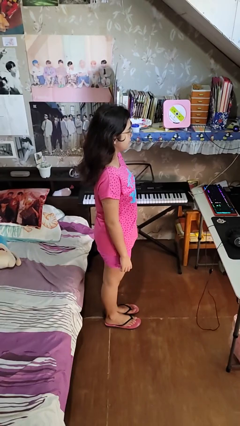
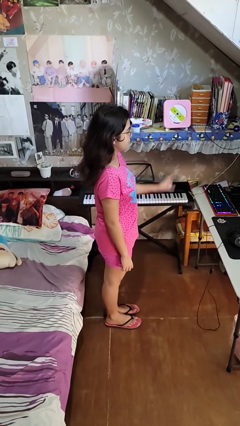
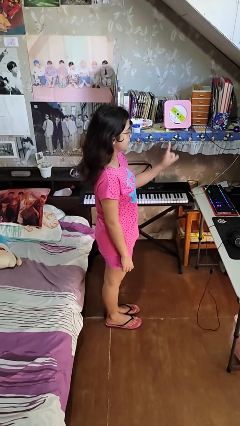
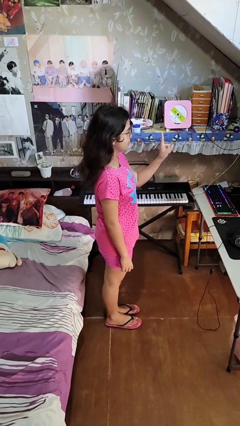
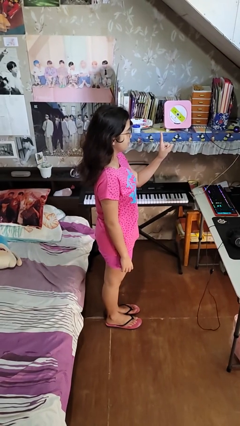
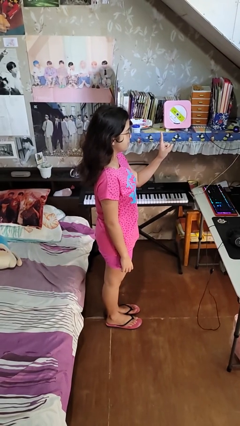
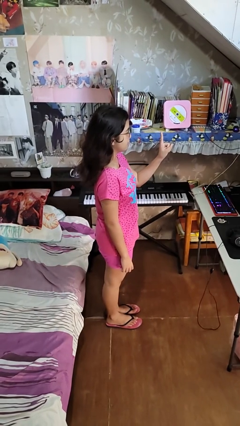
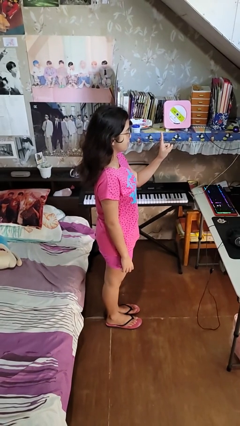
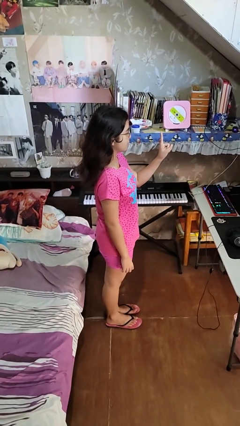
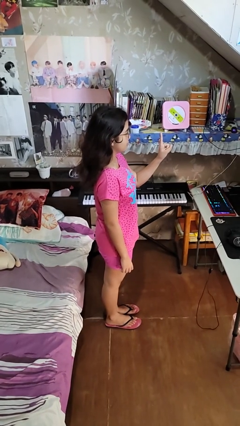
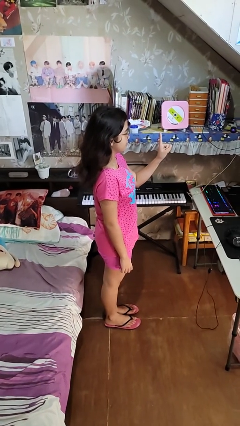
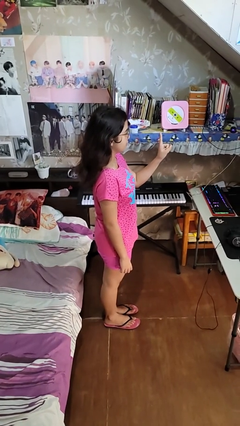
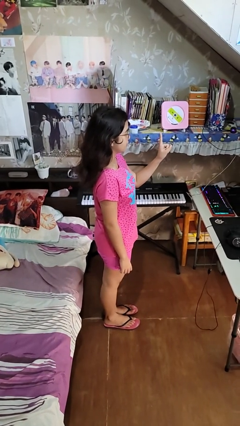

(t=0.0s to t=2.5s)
person gestures number one

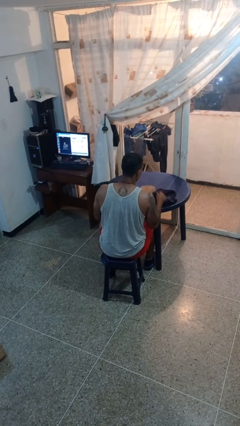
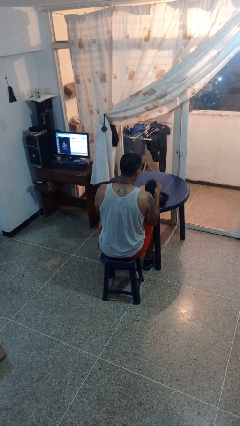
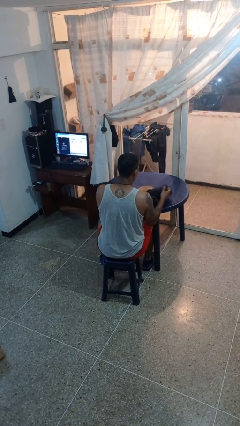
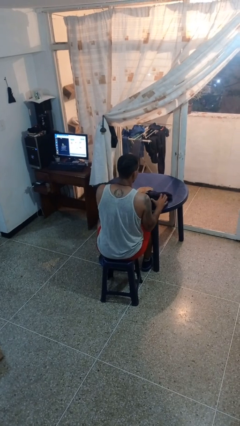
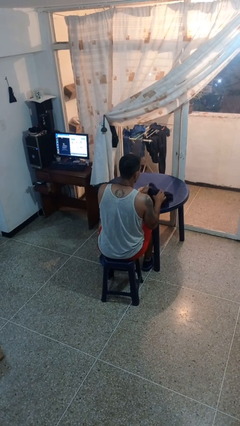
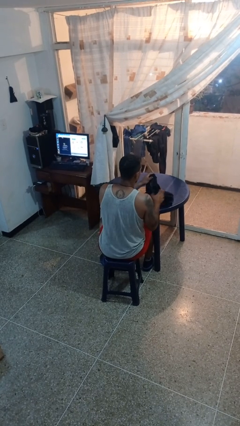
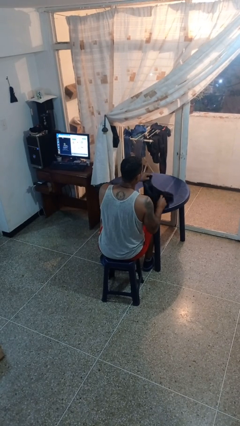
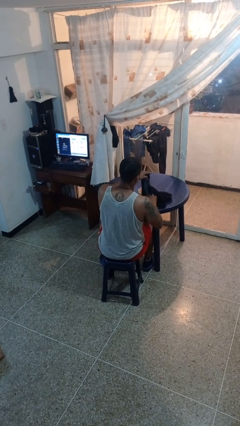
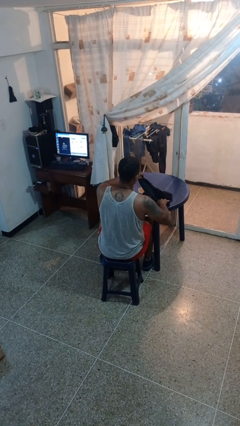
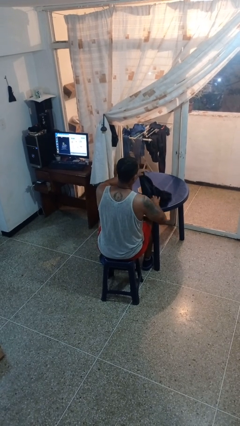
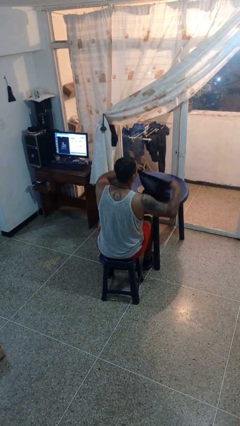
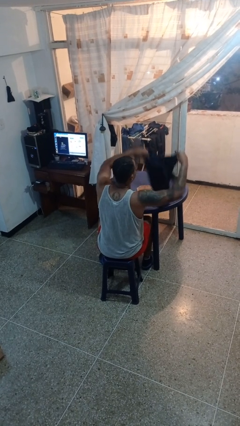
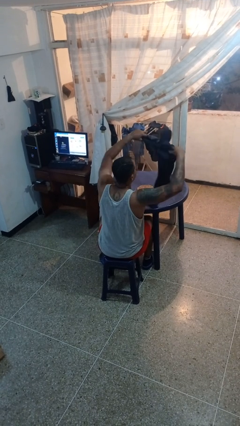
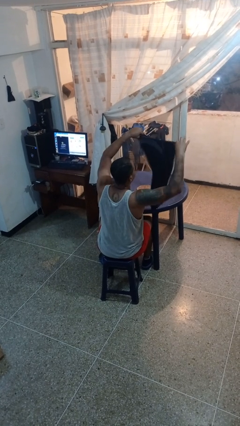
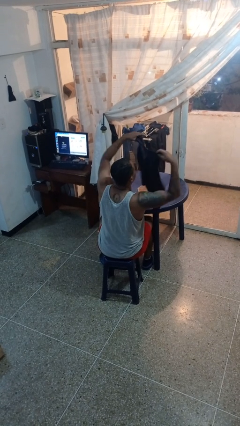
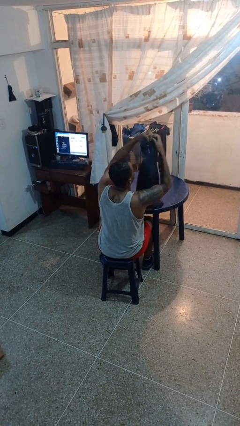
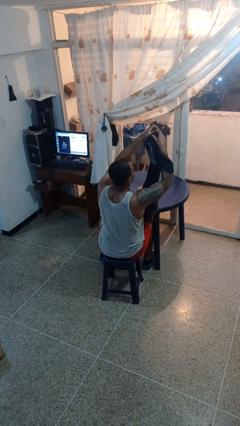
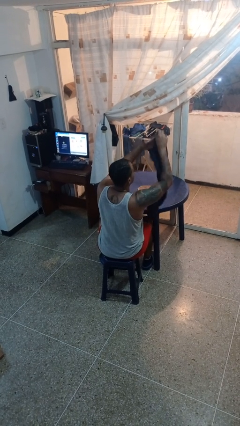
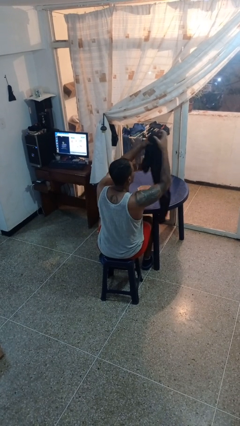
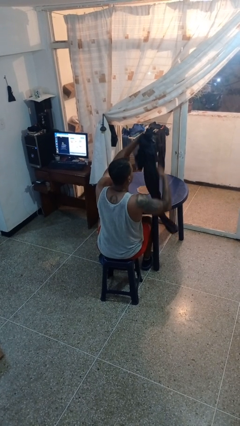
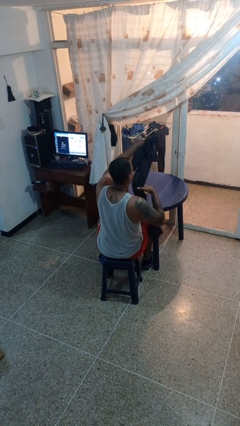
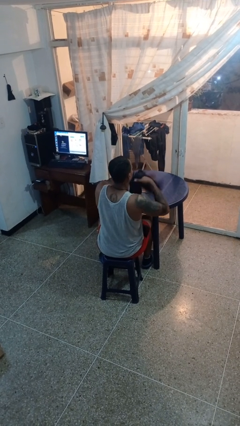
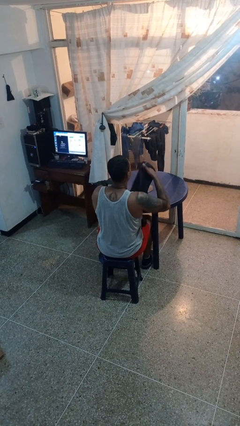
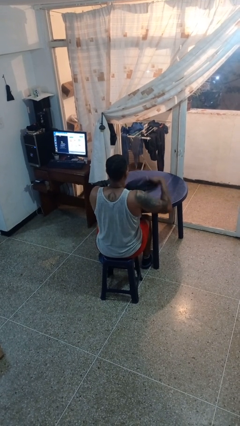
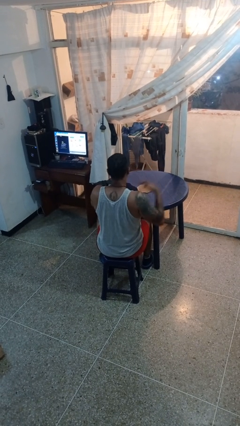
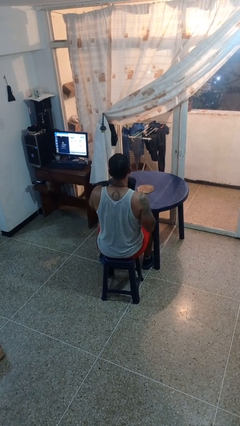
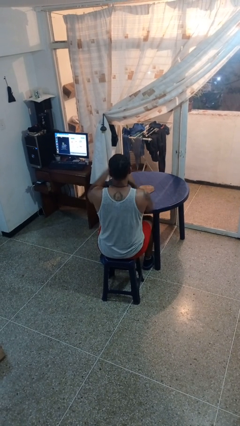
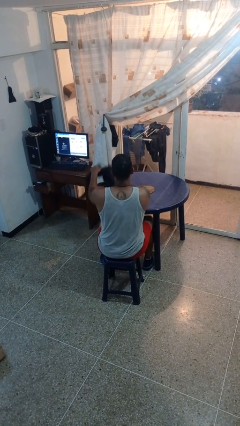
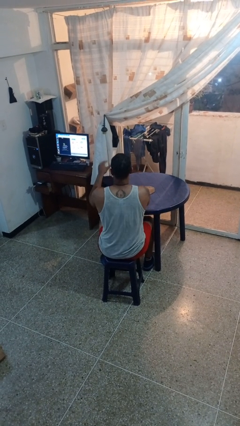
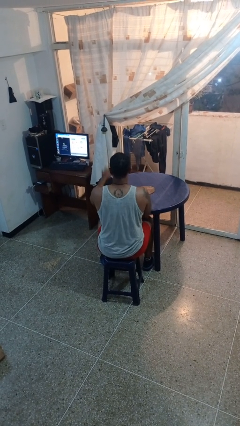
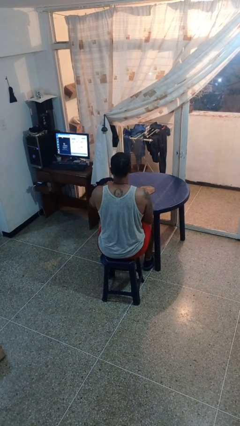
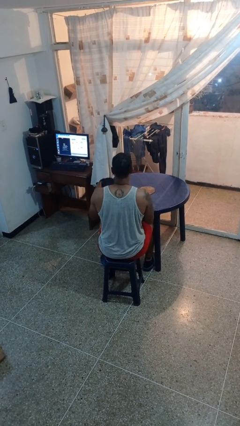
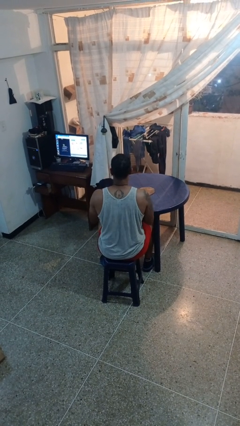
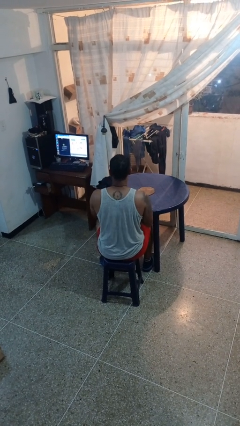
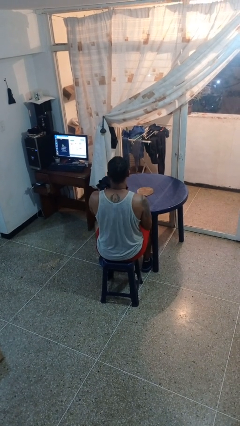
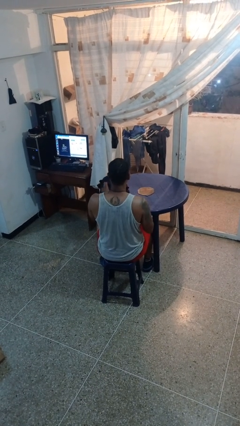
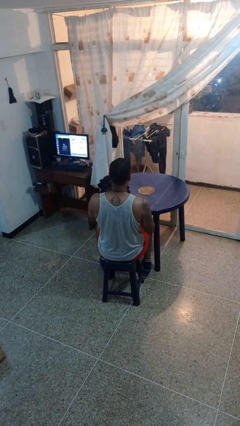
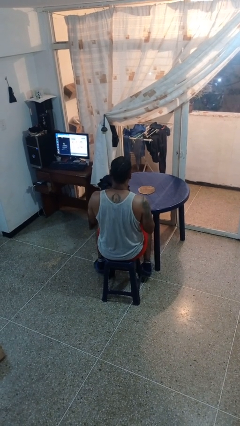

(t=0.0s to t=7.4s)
person folds pants

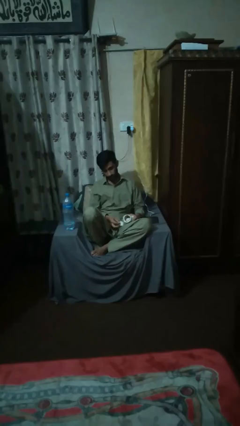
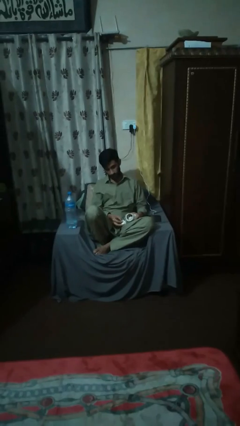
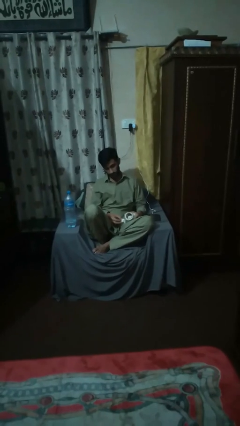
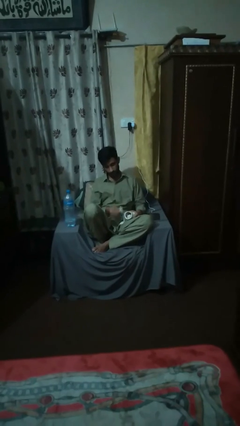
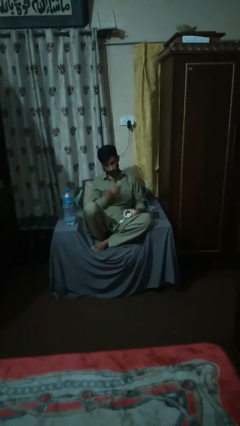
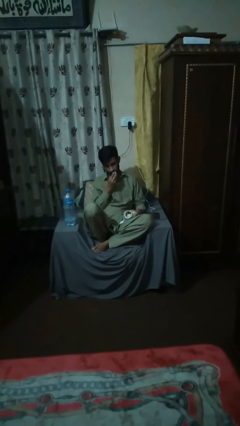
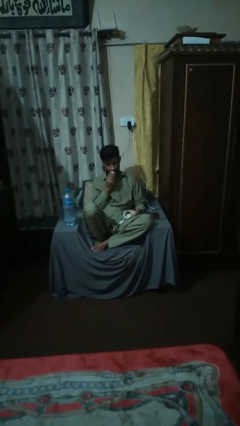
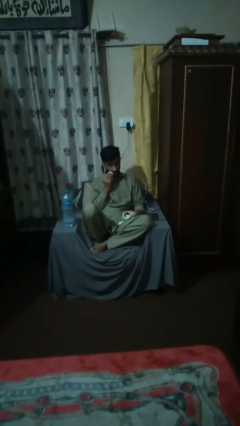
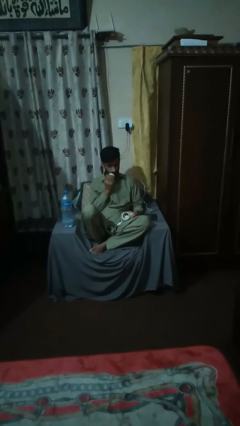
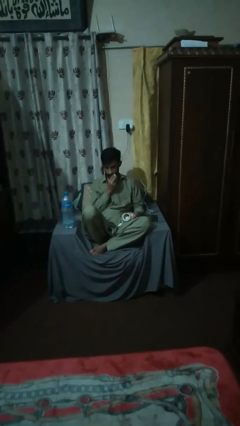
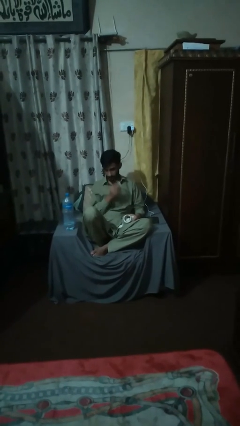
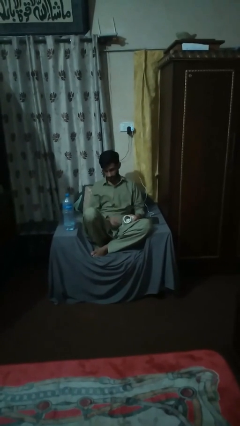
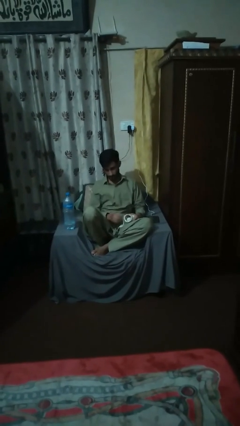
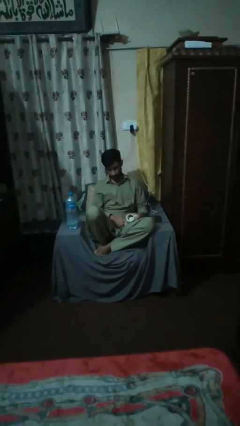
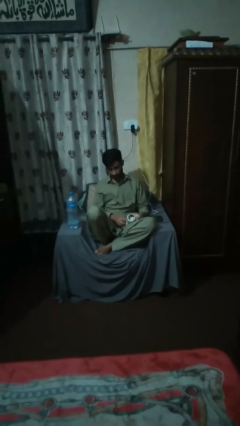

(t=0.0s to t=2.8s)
person wipes mouth with napkin

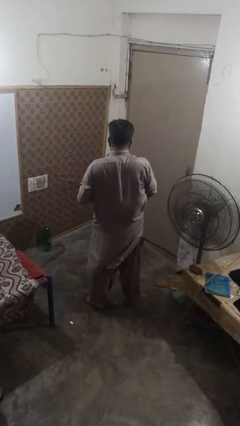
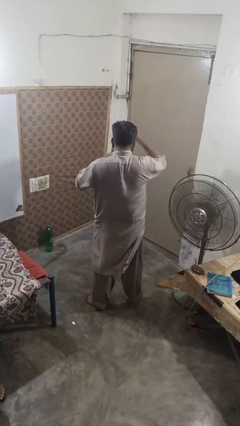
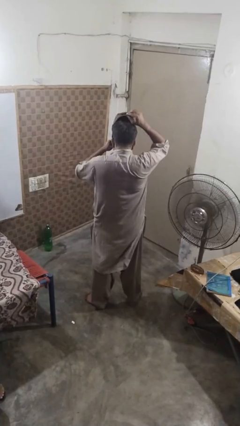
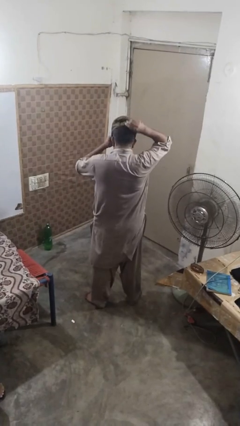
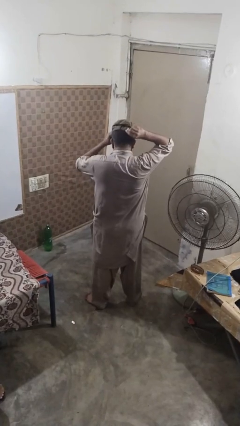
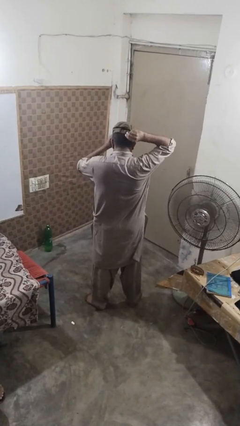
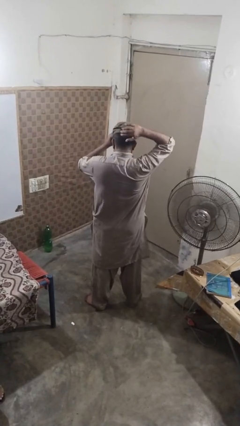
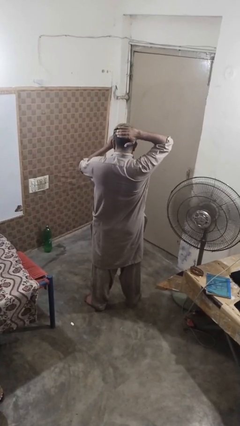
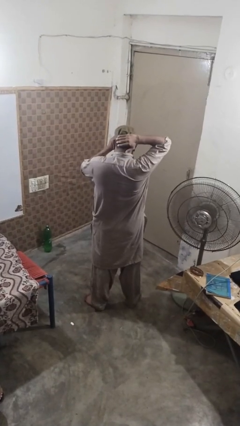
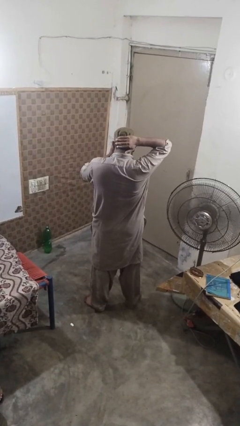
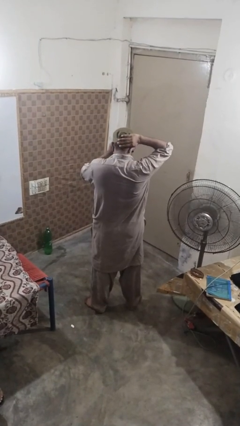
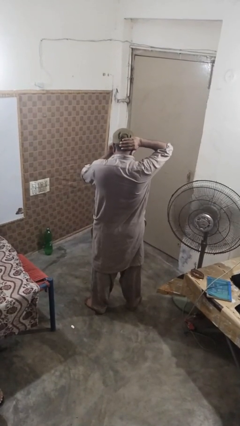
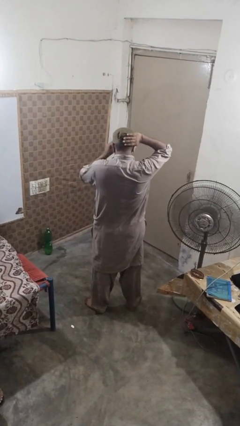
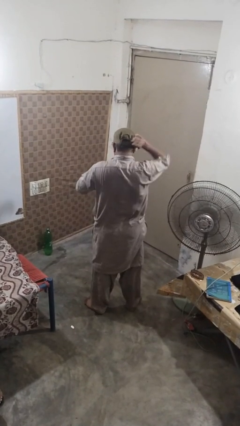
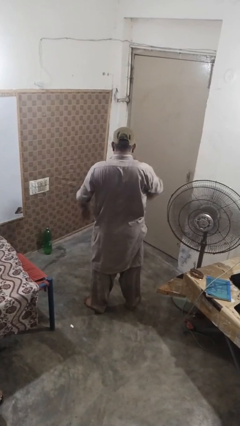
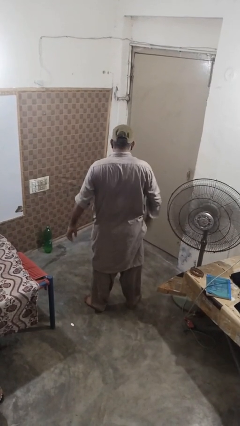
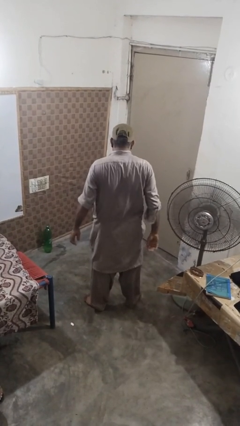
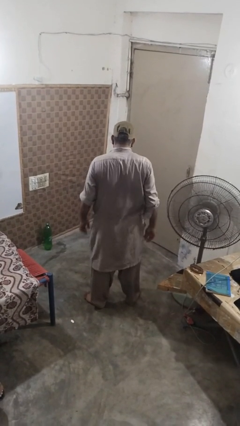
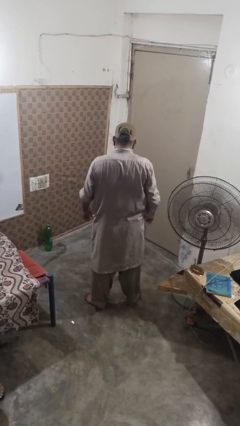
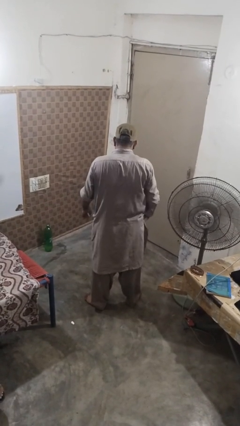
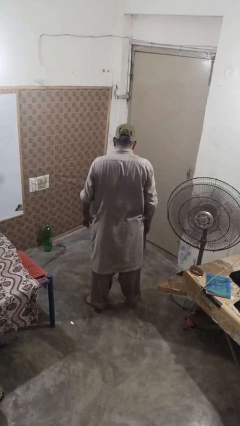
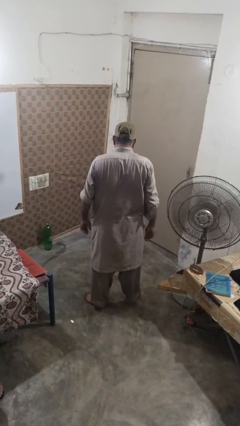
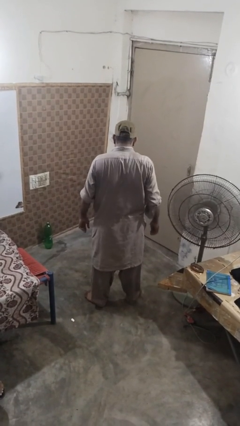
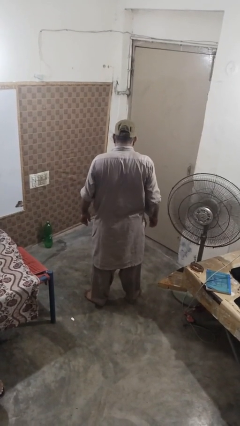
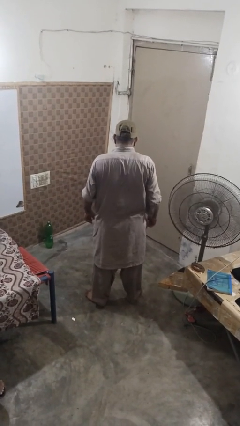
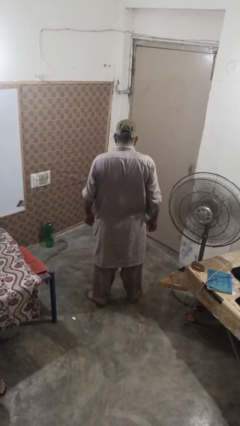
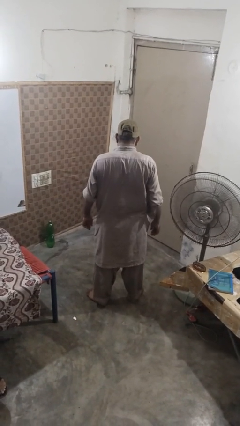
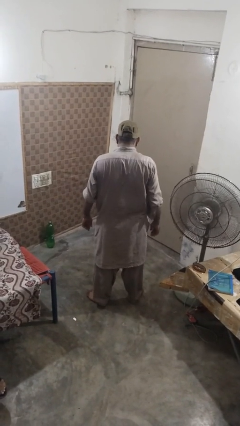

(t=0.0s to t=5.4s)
person puts on hat
